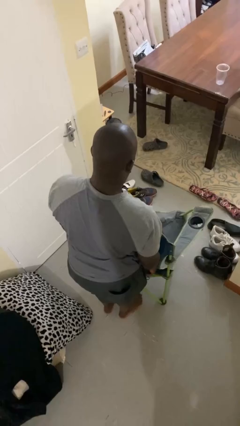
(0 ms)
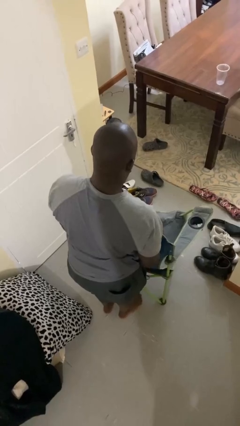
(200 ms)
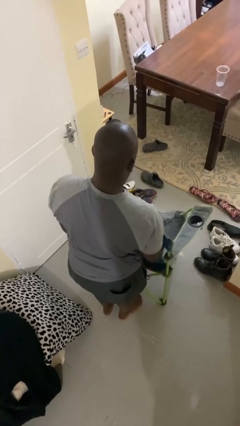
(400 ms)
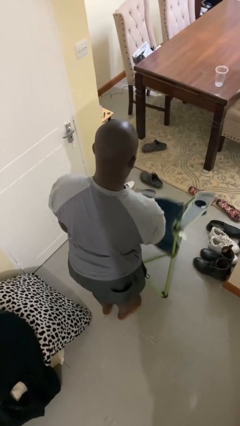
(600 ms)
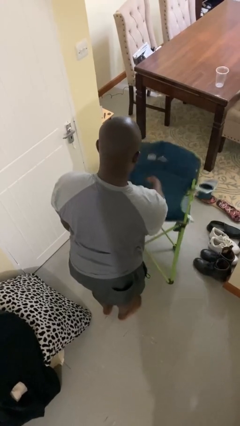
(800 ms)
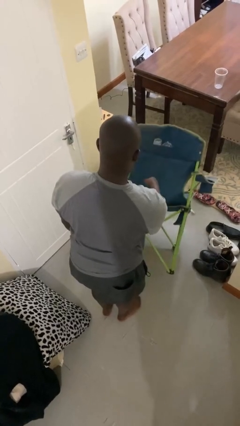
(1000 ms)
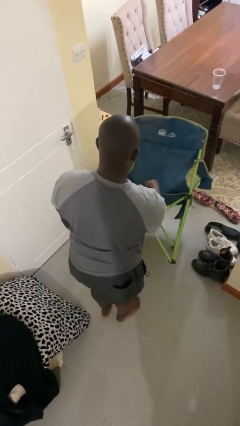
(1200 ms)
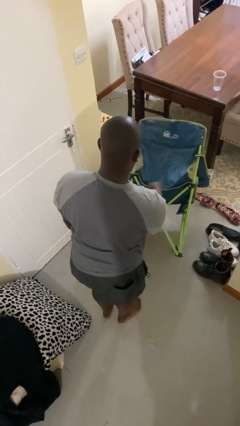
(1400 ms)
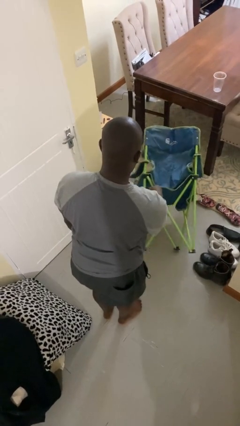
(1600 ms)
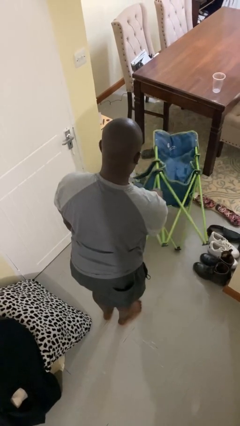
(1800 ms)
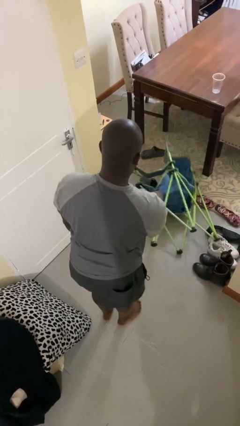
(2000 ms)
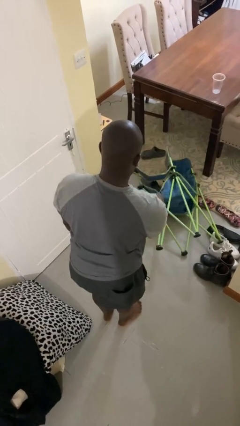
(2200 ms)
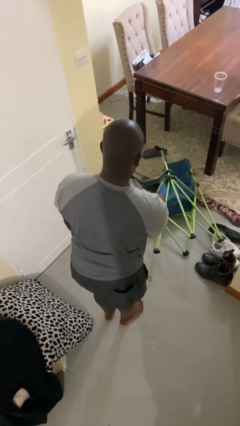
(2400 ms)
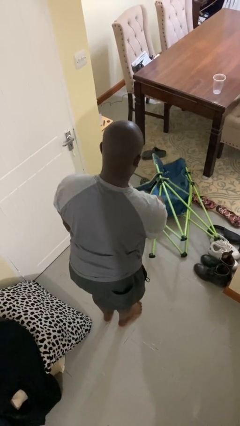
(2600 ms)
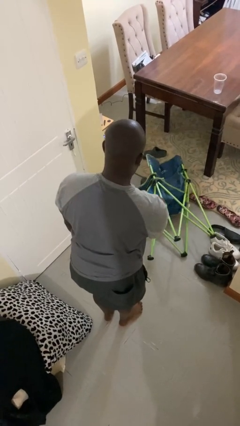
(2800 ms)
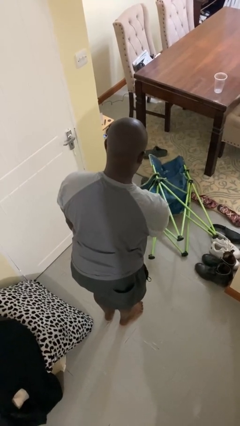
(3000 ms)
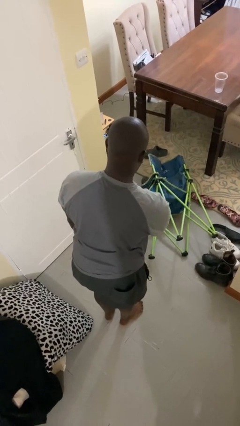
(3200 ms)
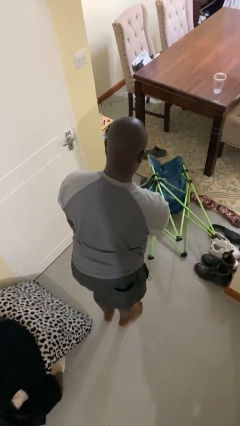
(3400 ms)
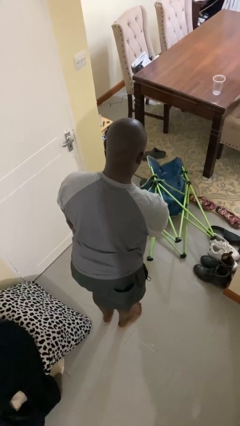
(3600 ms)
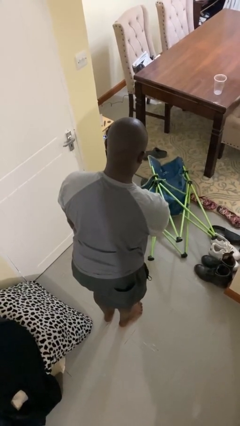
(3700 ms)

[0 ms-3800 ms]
person knocks over furniture

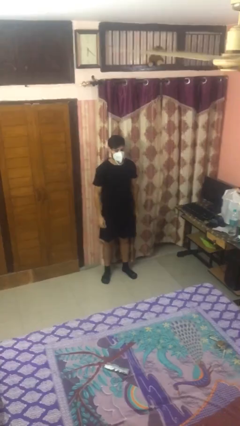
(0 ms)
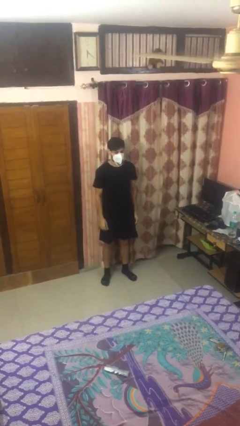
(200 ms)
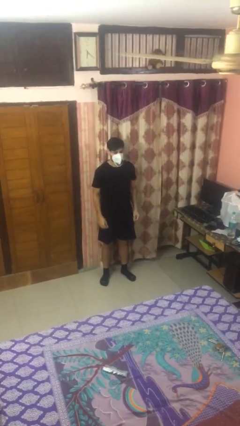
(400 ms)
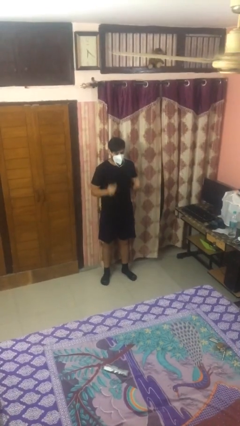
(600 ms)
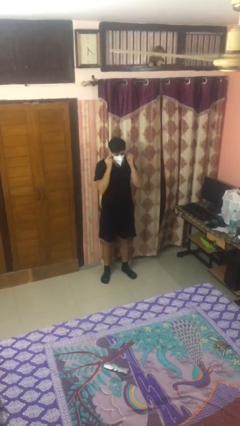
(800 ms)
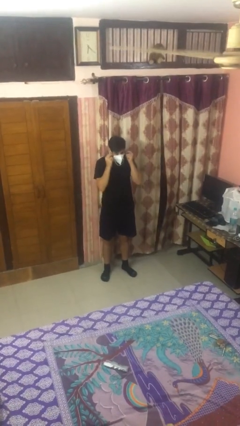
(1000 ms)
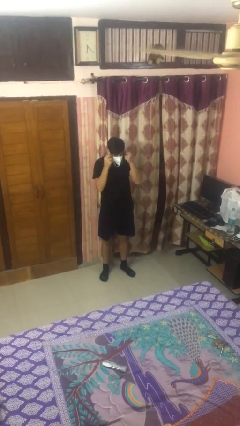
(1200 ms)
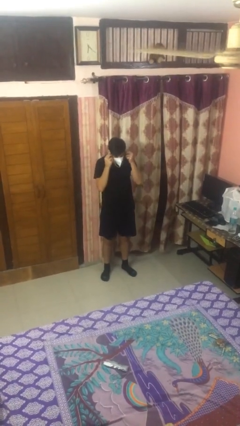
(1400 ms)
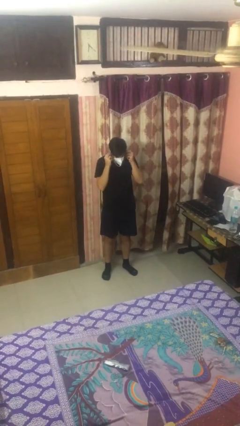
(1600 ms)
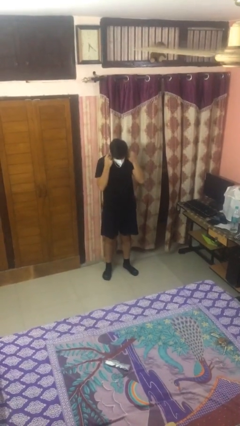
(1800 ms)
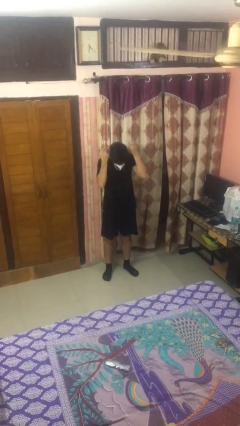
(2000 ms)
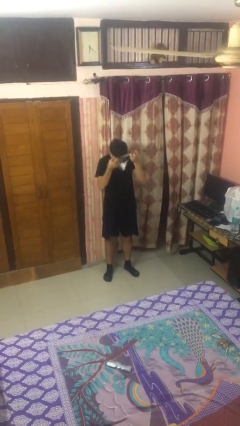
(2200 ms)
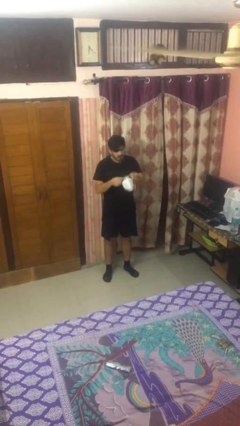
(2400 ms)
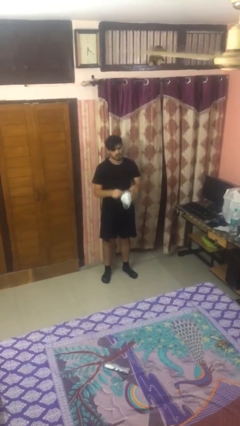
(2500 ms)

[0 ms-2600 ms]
person takes off facemask

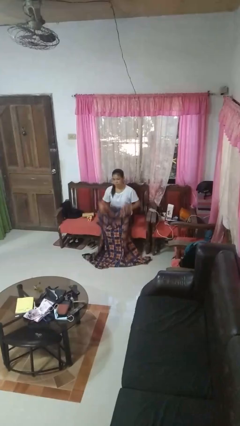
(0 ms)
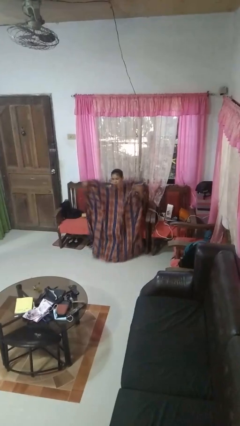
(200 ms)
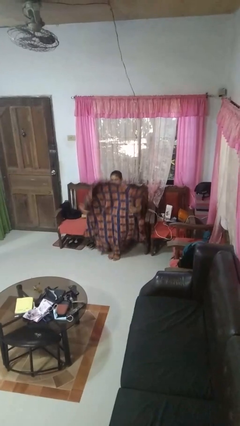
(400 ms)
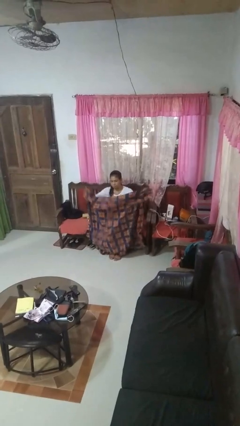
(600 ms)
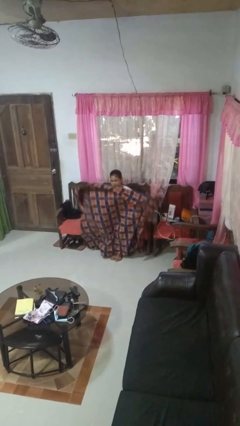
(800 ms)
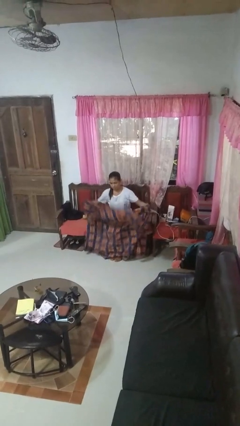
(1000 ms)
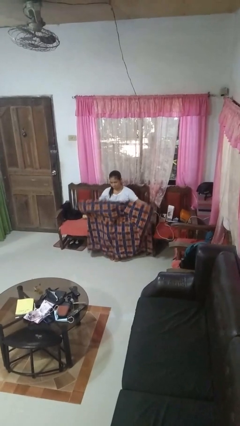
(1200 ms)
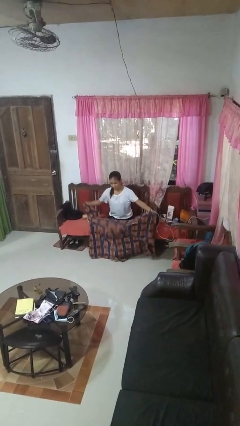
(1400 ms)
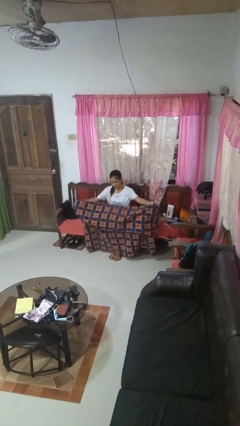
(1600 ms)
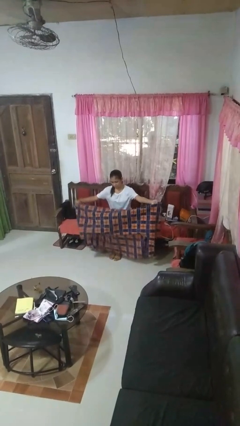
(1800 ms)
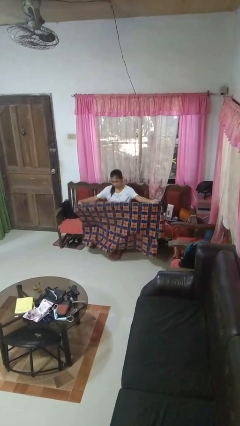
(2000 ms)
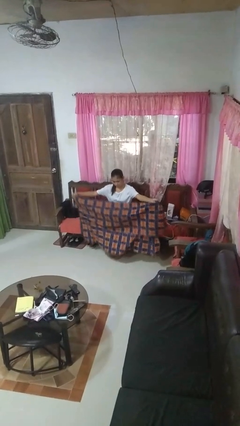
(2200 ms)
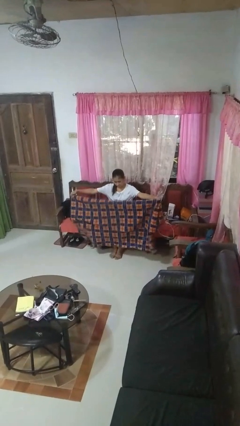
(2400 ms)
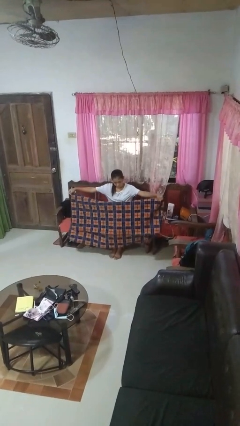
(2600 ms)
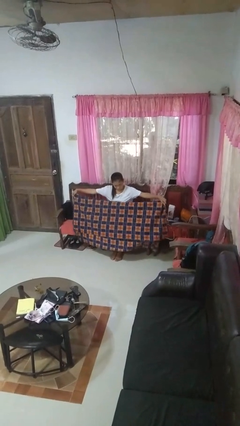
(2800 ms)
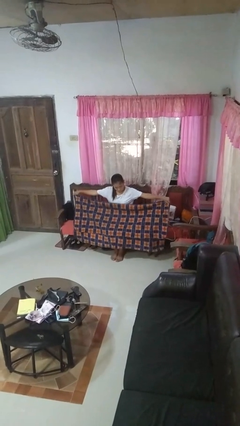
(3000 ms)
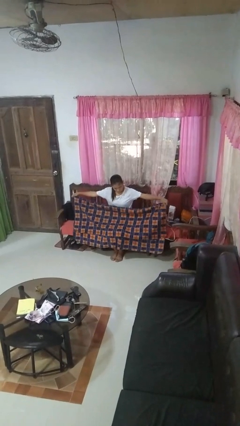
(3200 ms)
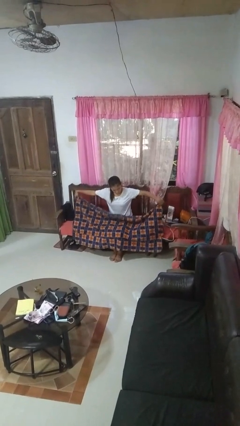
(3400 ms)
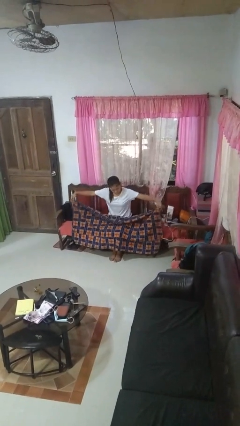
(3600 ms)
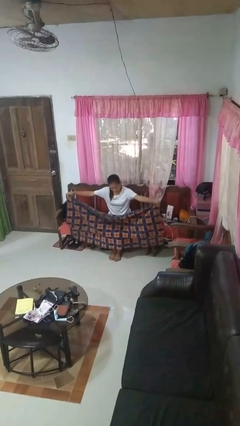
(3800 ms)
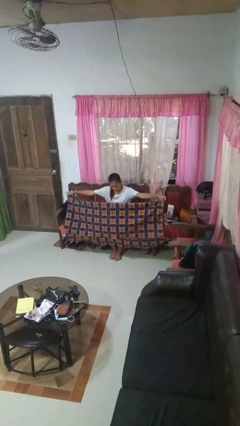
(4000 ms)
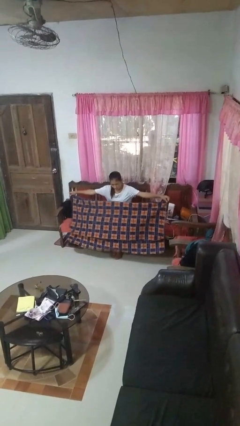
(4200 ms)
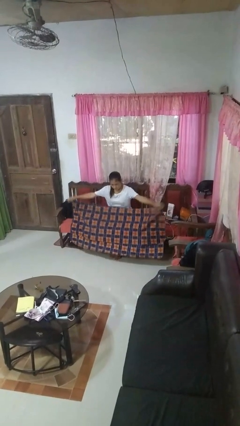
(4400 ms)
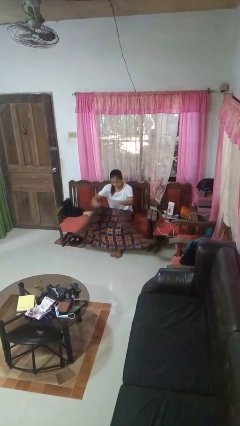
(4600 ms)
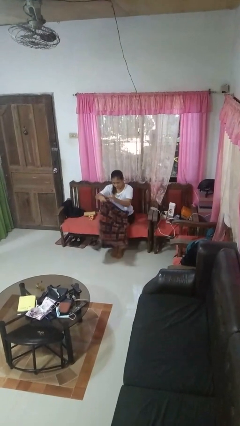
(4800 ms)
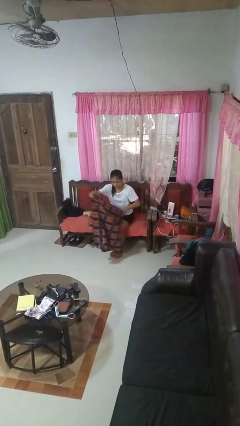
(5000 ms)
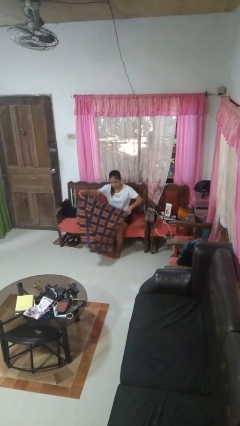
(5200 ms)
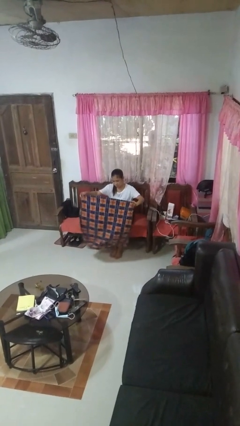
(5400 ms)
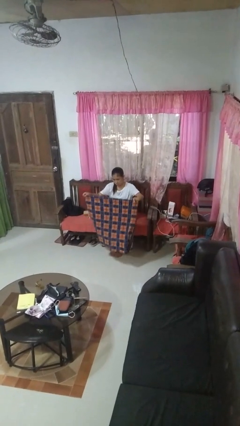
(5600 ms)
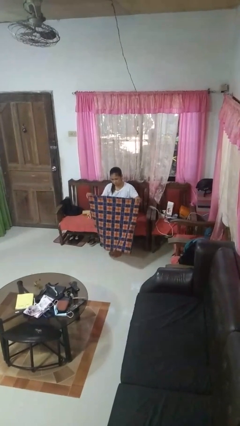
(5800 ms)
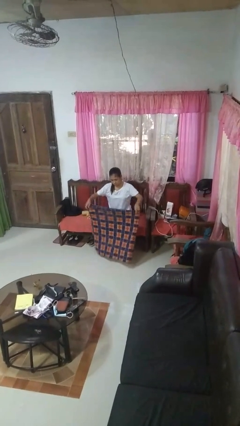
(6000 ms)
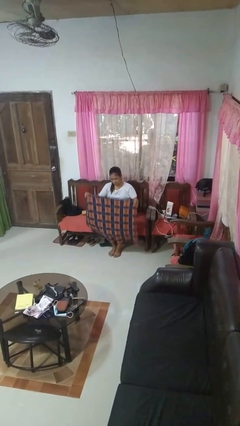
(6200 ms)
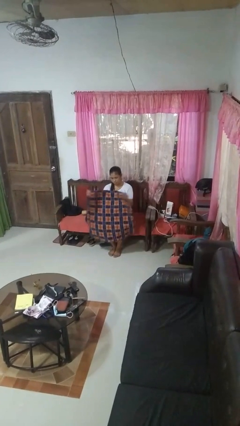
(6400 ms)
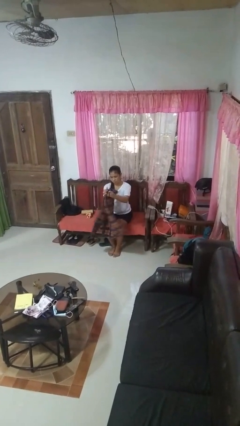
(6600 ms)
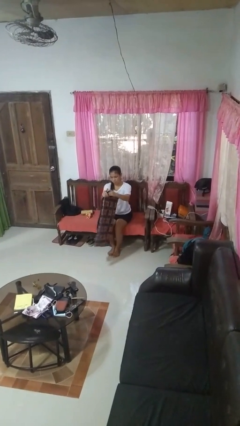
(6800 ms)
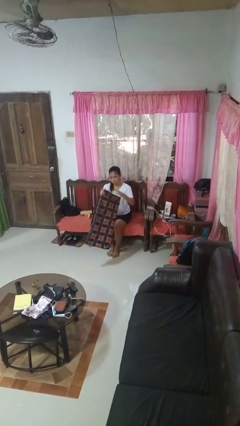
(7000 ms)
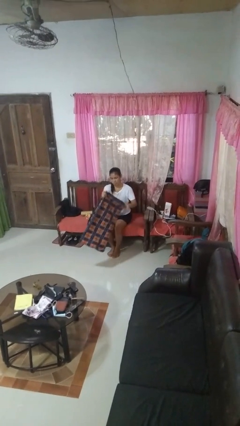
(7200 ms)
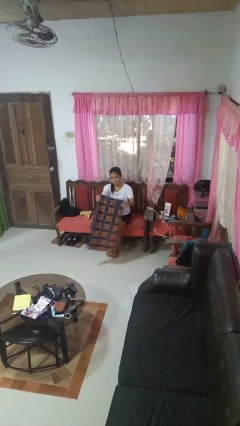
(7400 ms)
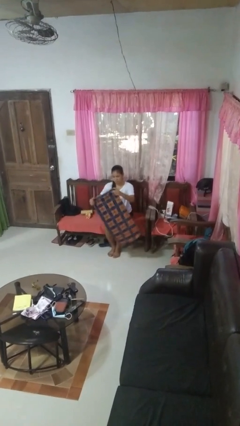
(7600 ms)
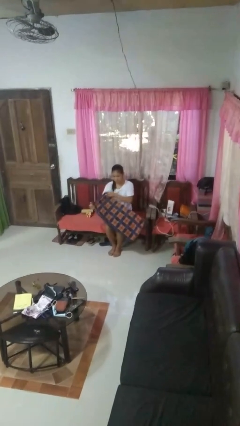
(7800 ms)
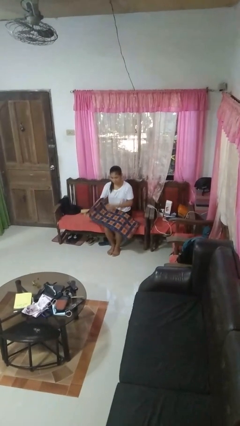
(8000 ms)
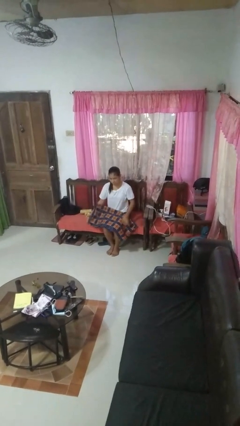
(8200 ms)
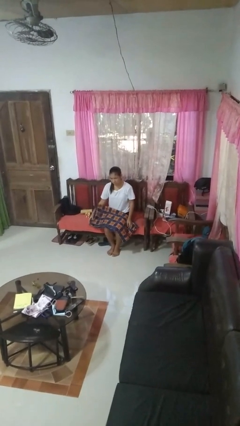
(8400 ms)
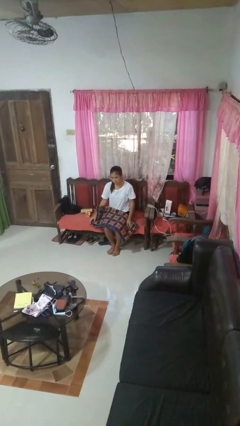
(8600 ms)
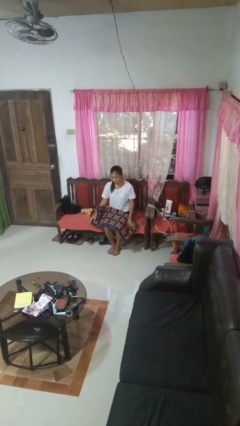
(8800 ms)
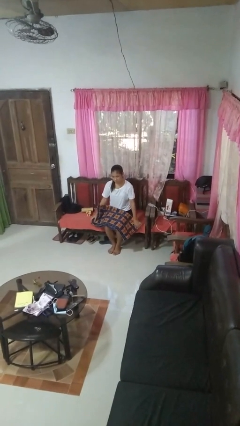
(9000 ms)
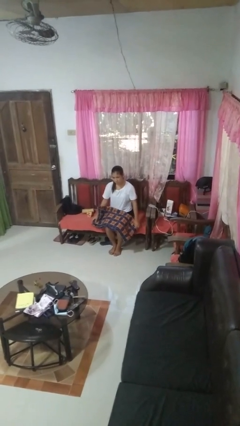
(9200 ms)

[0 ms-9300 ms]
person folds blanket

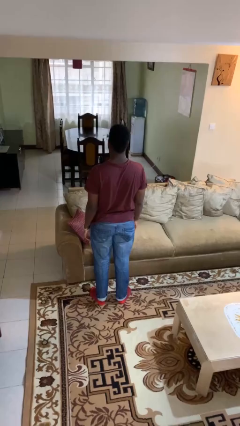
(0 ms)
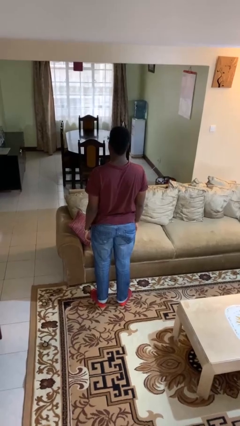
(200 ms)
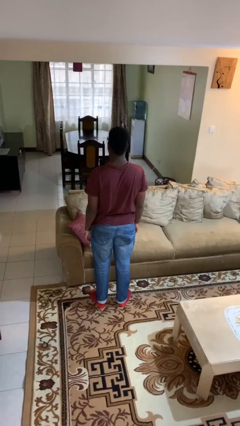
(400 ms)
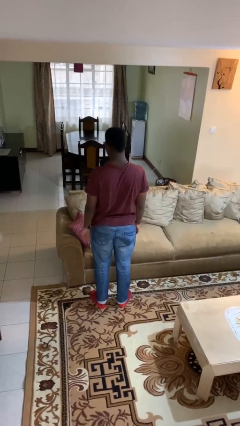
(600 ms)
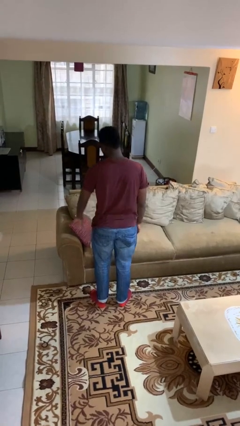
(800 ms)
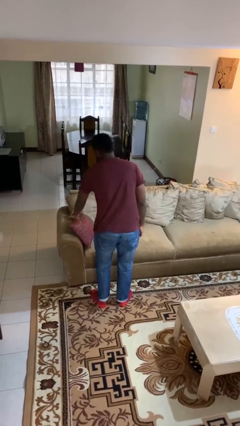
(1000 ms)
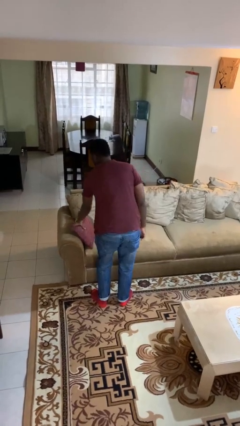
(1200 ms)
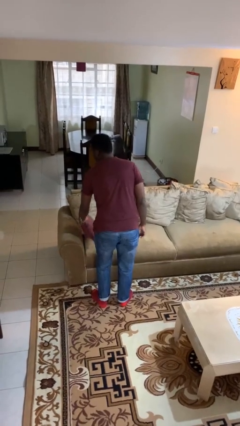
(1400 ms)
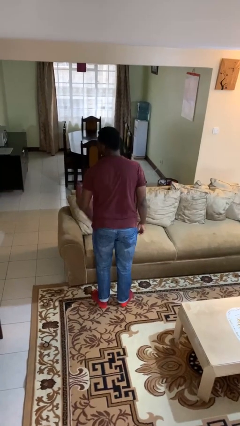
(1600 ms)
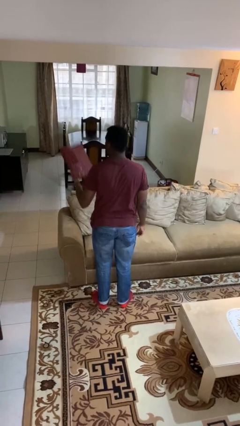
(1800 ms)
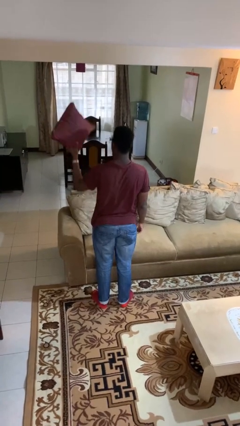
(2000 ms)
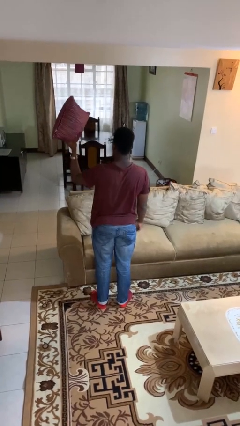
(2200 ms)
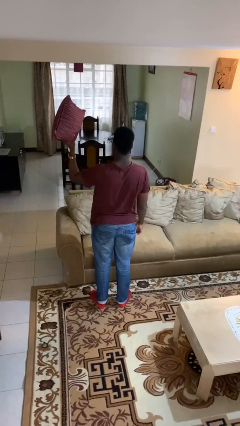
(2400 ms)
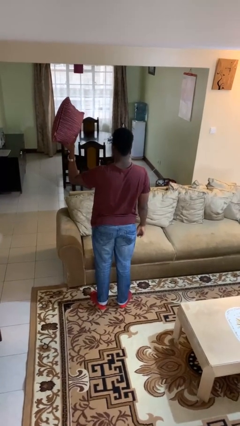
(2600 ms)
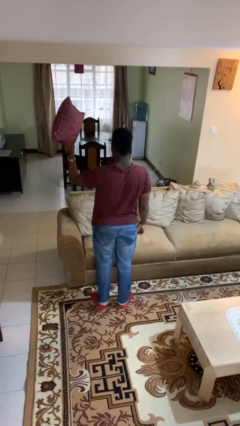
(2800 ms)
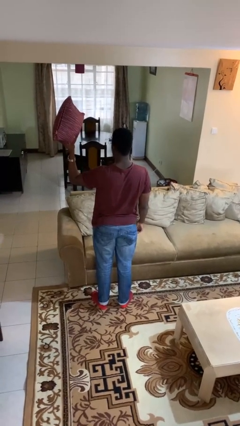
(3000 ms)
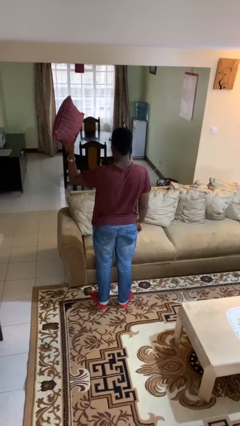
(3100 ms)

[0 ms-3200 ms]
person picks up object from couch
